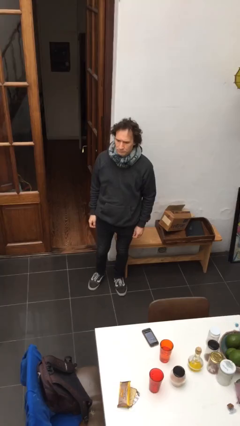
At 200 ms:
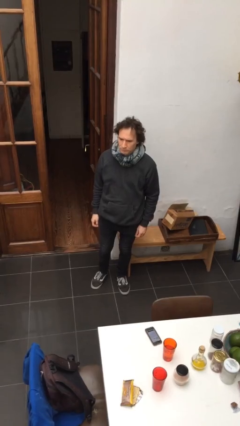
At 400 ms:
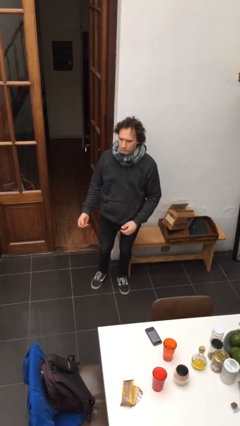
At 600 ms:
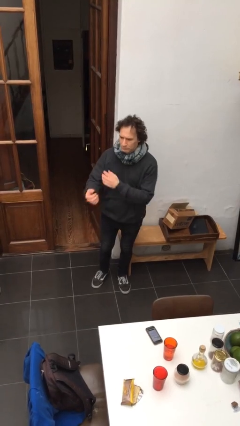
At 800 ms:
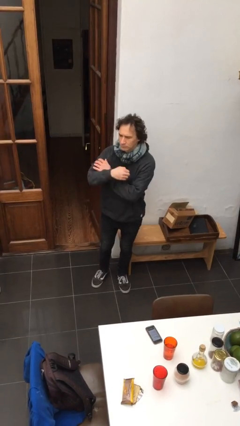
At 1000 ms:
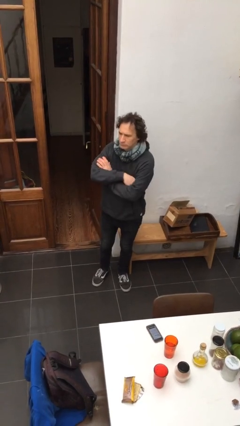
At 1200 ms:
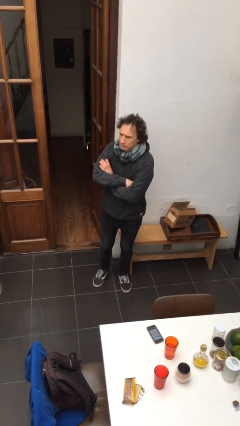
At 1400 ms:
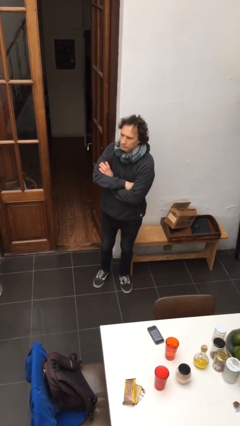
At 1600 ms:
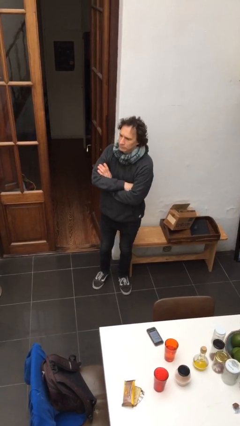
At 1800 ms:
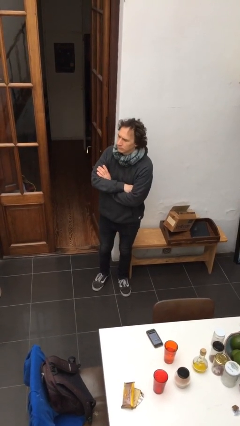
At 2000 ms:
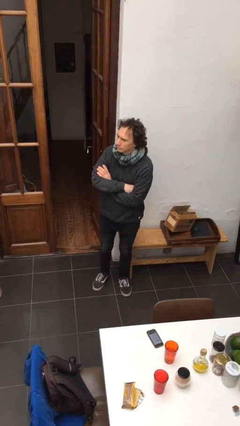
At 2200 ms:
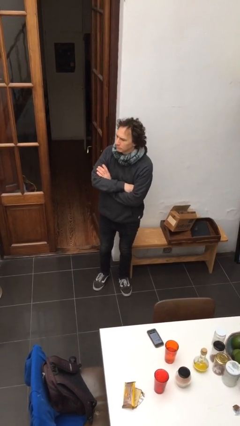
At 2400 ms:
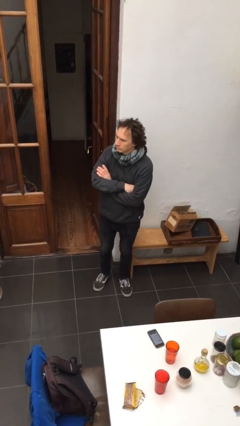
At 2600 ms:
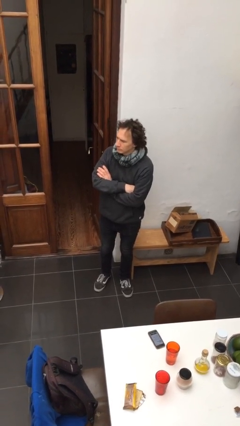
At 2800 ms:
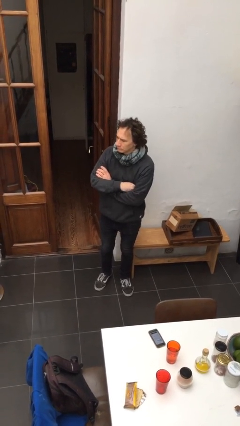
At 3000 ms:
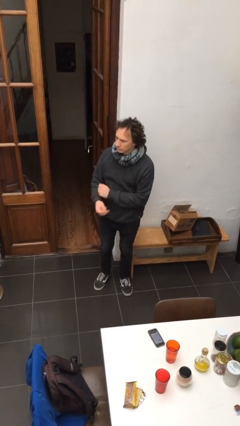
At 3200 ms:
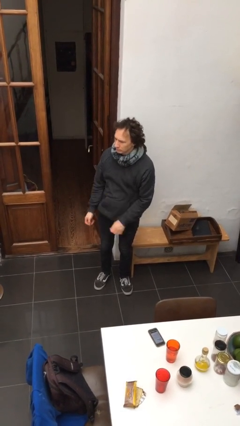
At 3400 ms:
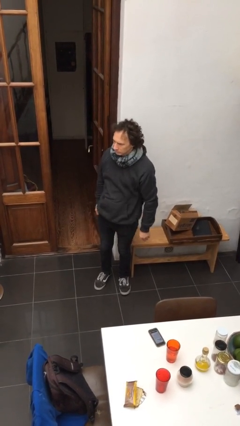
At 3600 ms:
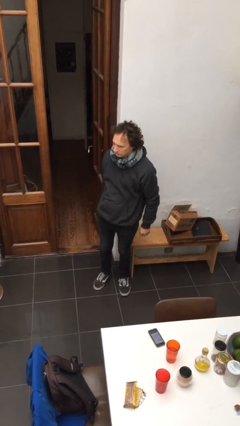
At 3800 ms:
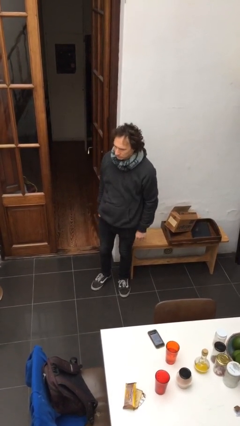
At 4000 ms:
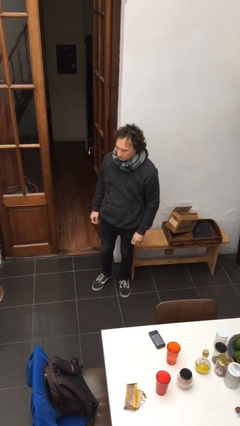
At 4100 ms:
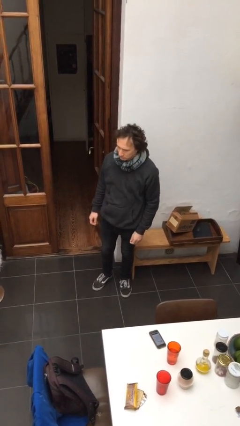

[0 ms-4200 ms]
person crosses arms

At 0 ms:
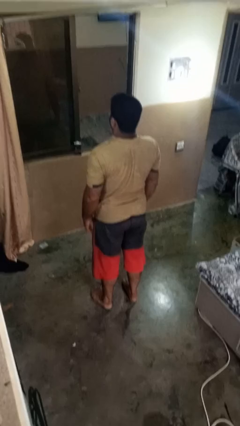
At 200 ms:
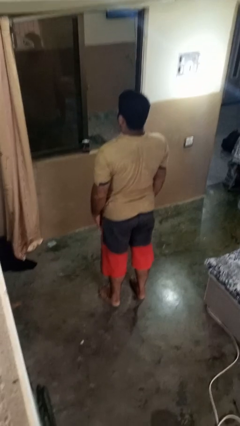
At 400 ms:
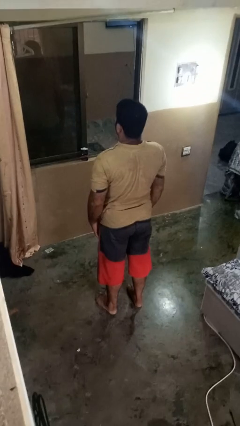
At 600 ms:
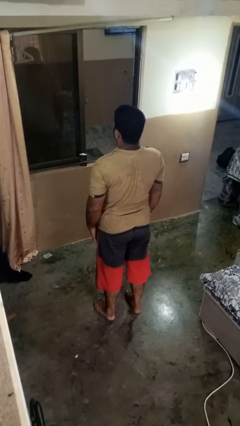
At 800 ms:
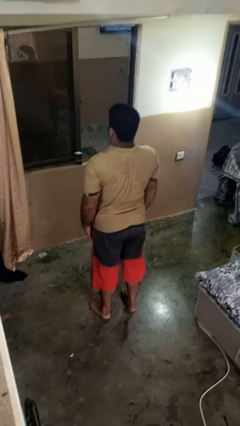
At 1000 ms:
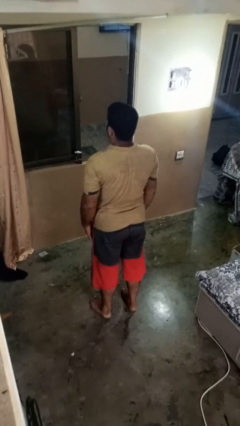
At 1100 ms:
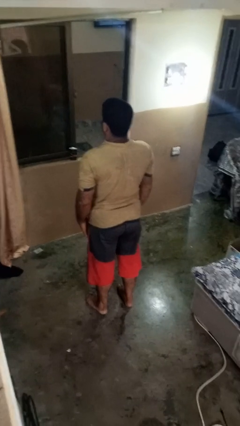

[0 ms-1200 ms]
person stands up

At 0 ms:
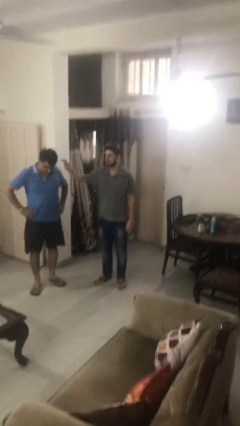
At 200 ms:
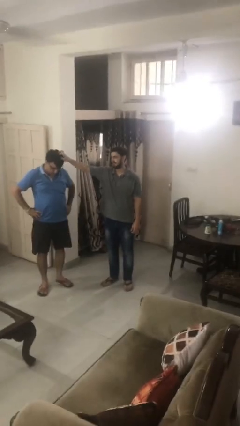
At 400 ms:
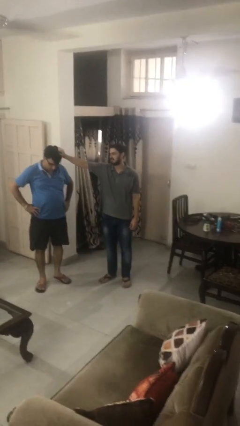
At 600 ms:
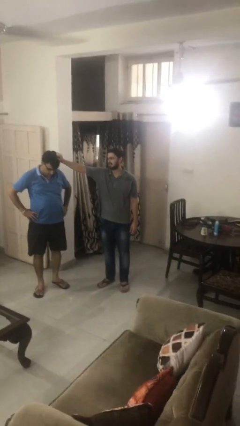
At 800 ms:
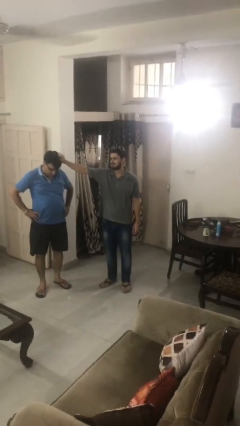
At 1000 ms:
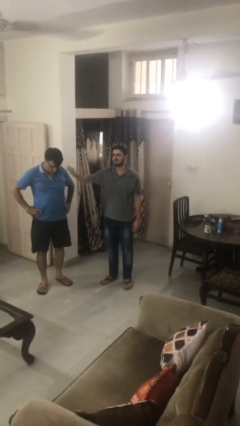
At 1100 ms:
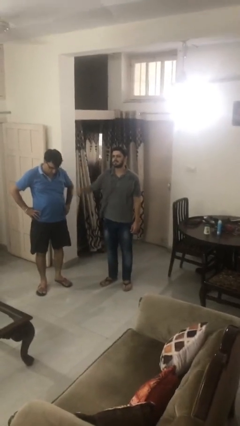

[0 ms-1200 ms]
person grabs person by hair

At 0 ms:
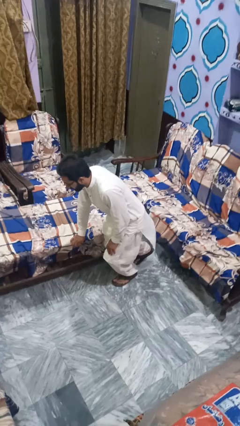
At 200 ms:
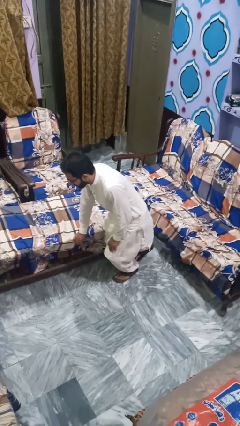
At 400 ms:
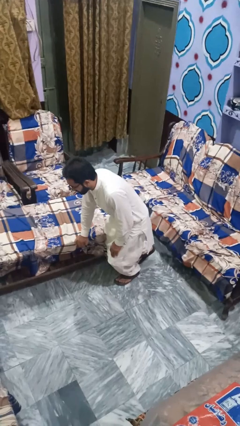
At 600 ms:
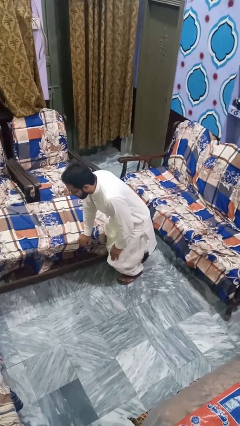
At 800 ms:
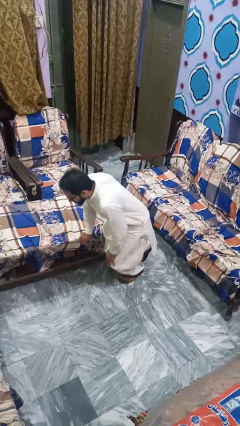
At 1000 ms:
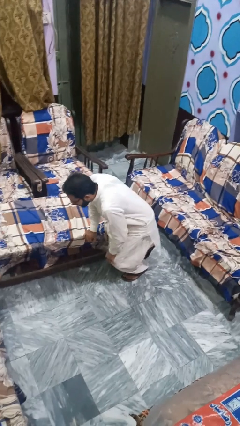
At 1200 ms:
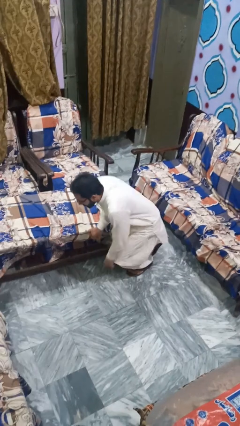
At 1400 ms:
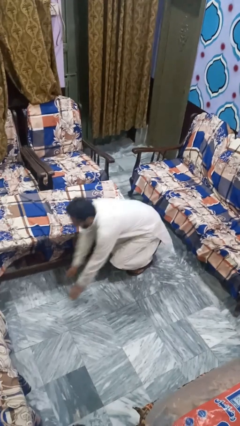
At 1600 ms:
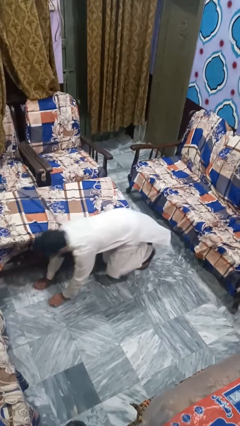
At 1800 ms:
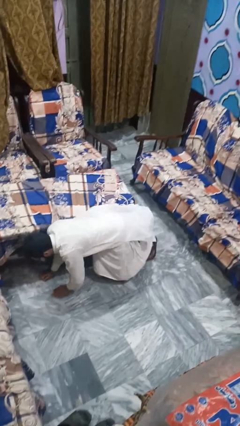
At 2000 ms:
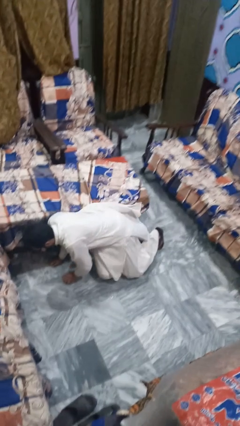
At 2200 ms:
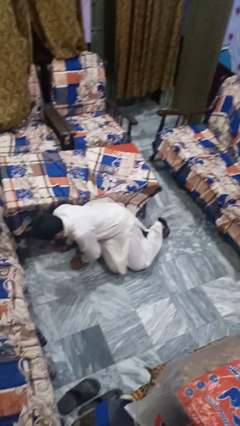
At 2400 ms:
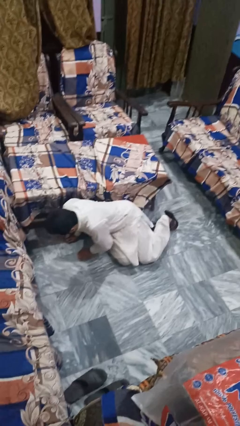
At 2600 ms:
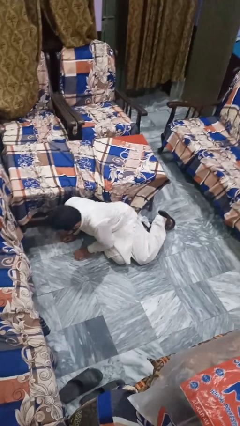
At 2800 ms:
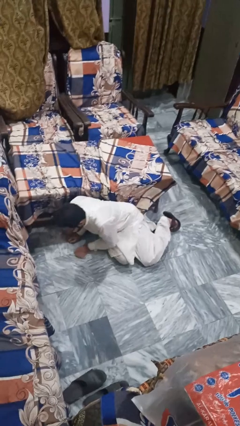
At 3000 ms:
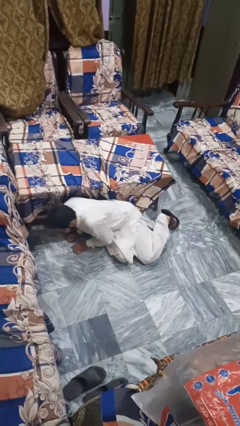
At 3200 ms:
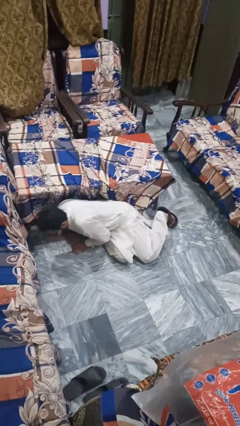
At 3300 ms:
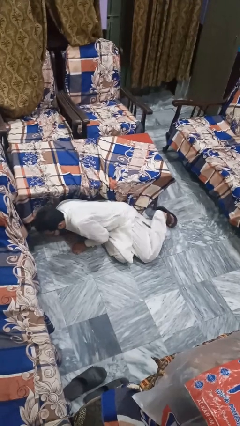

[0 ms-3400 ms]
person lies down on floor

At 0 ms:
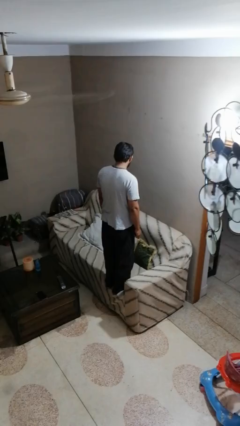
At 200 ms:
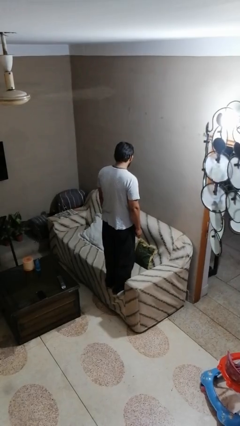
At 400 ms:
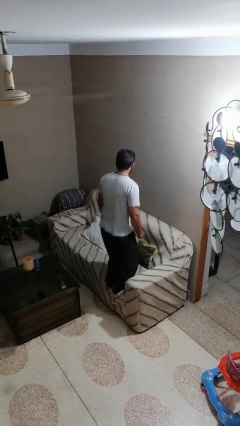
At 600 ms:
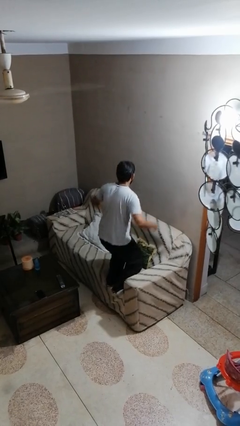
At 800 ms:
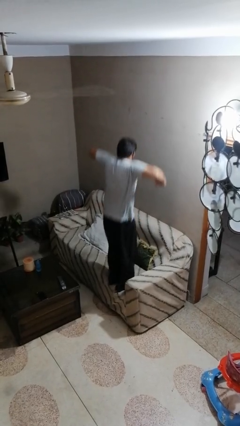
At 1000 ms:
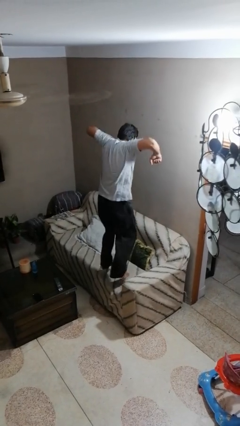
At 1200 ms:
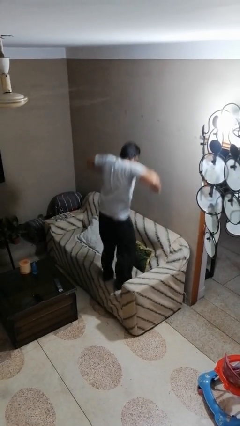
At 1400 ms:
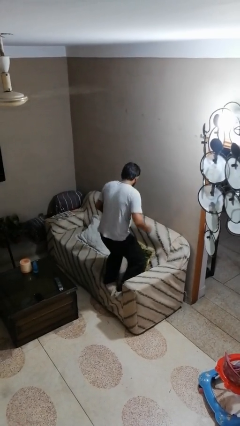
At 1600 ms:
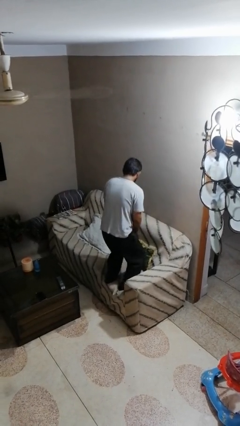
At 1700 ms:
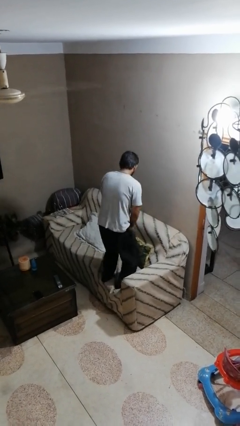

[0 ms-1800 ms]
person jumps on couch

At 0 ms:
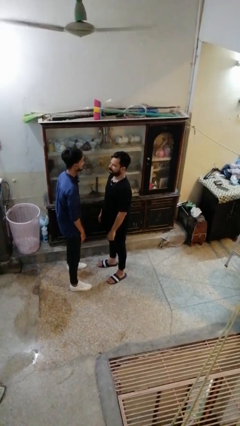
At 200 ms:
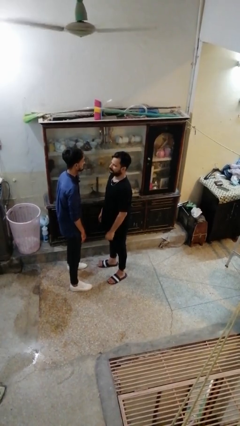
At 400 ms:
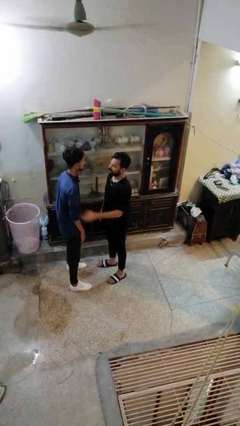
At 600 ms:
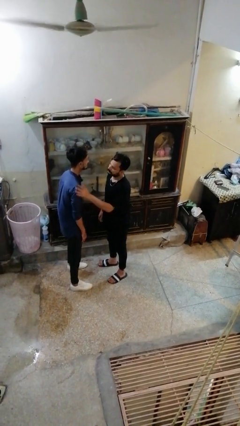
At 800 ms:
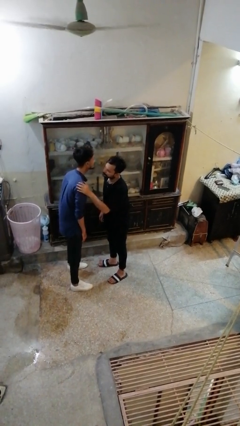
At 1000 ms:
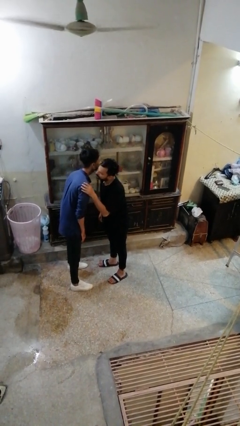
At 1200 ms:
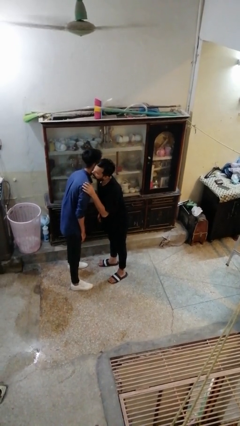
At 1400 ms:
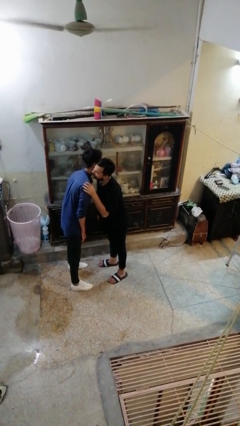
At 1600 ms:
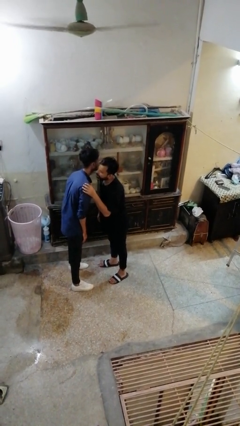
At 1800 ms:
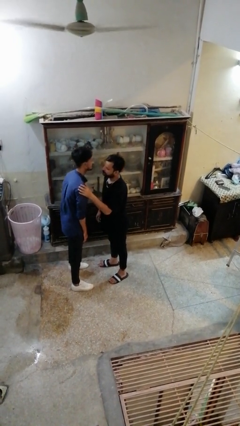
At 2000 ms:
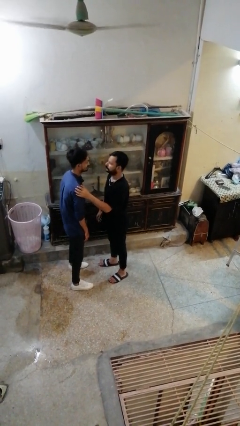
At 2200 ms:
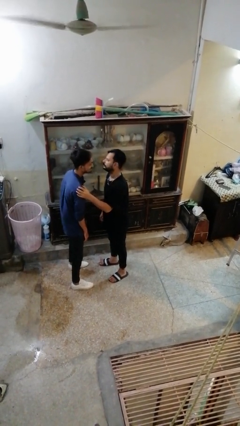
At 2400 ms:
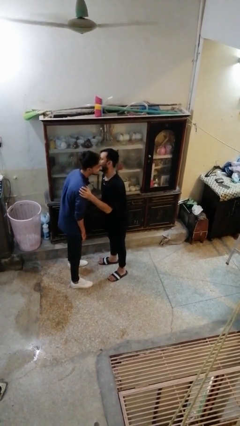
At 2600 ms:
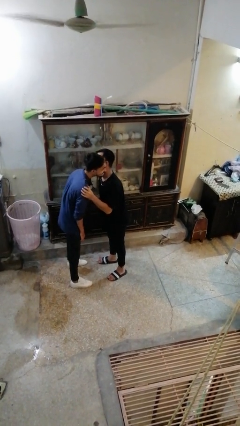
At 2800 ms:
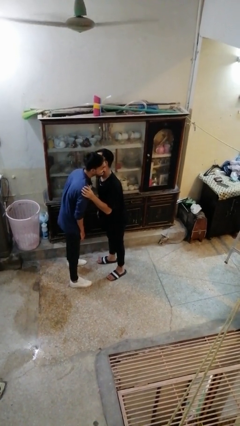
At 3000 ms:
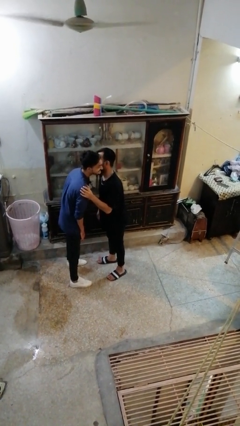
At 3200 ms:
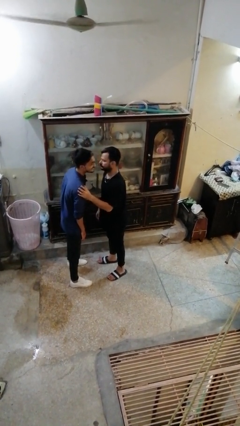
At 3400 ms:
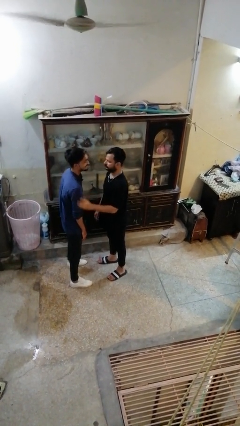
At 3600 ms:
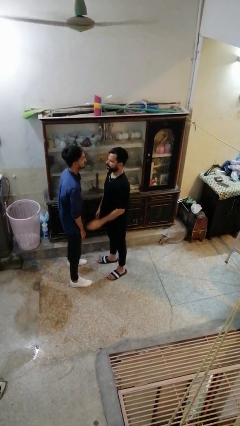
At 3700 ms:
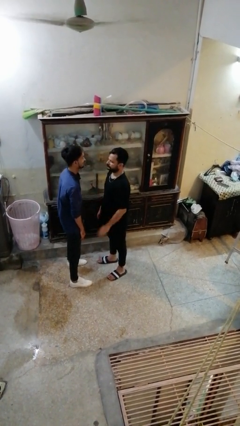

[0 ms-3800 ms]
person kisses cheek of person

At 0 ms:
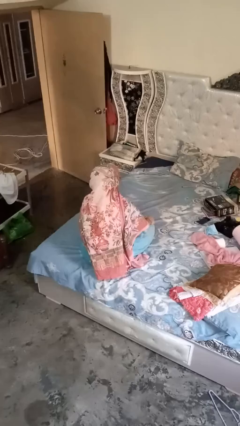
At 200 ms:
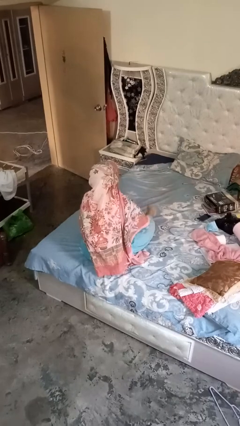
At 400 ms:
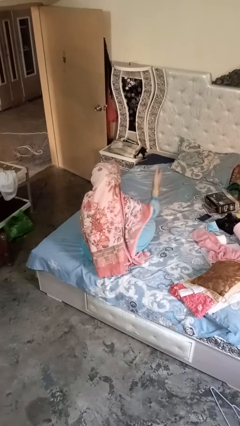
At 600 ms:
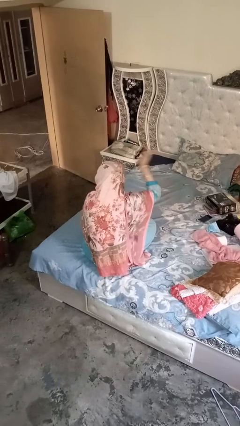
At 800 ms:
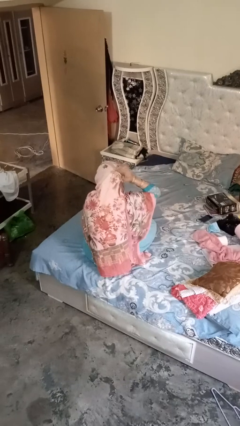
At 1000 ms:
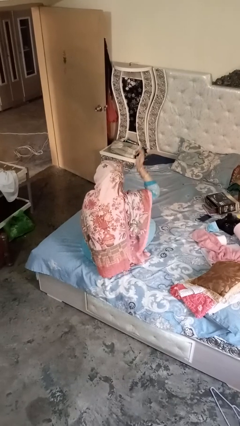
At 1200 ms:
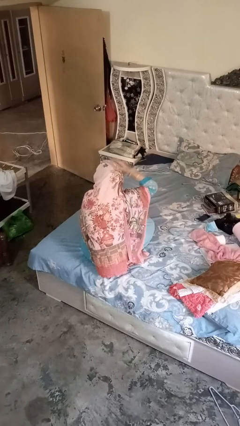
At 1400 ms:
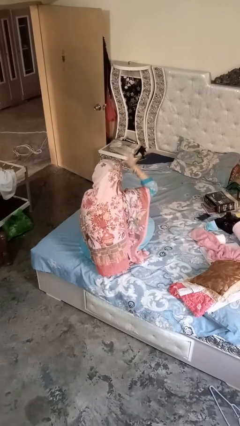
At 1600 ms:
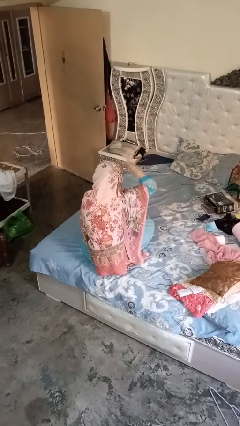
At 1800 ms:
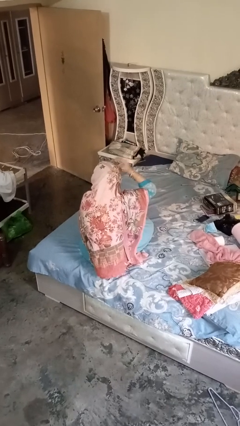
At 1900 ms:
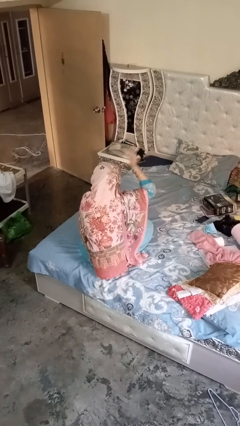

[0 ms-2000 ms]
person pats head
